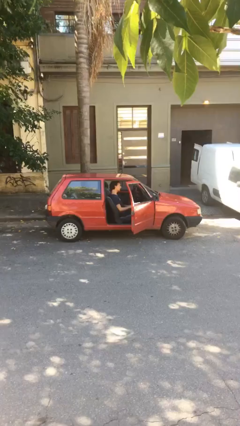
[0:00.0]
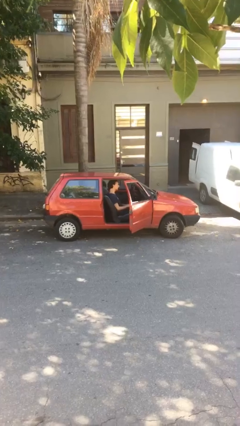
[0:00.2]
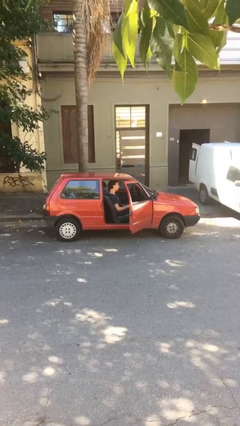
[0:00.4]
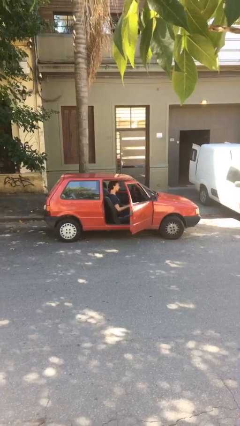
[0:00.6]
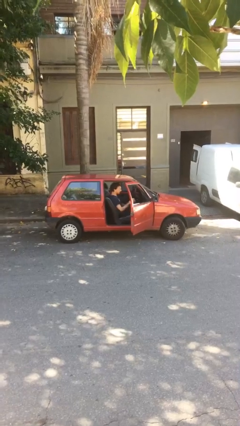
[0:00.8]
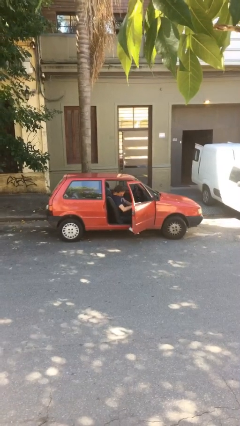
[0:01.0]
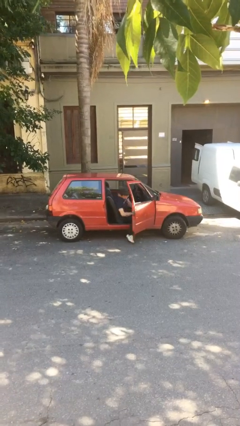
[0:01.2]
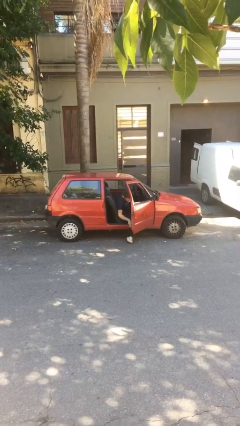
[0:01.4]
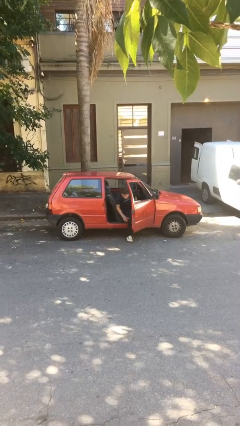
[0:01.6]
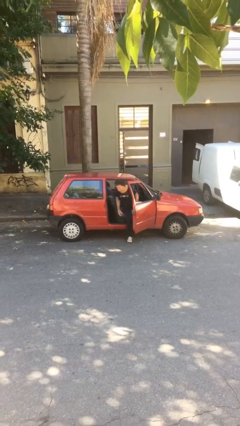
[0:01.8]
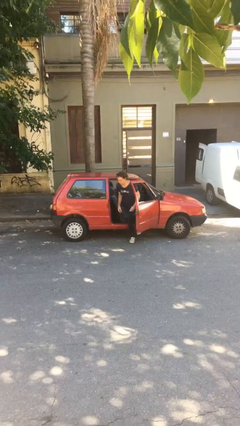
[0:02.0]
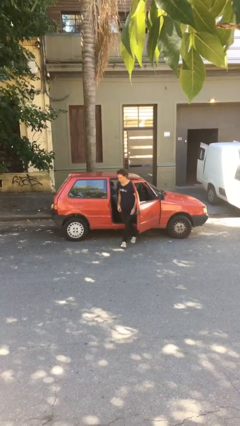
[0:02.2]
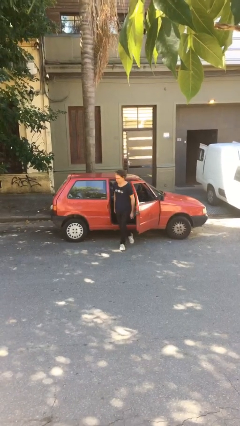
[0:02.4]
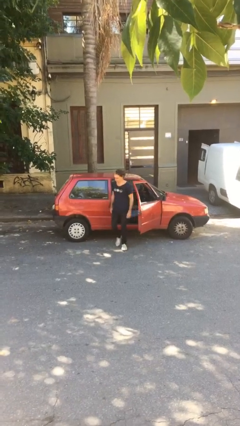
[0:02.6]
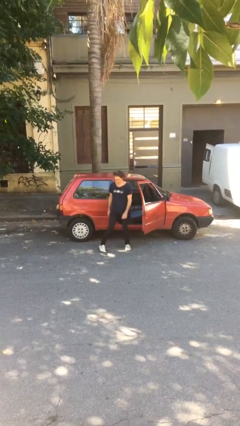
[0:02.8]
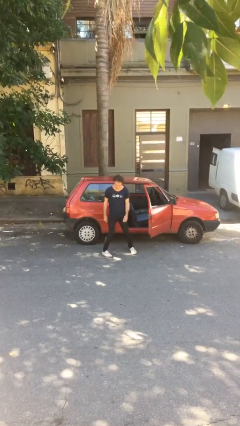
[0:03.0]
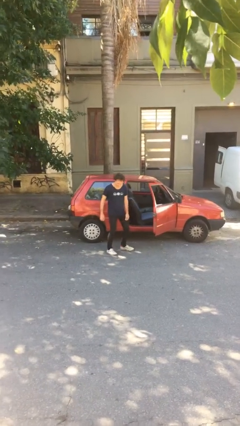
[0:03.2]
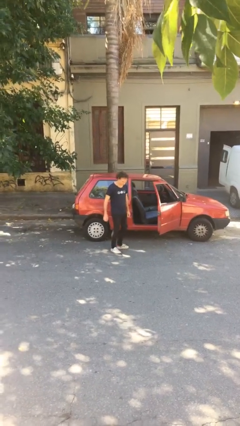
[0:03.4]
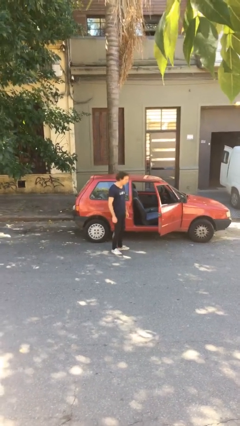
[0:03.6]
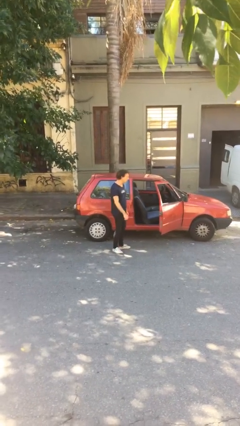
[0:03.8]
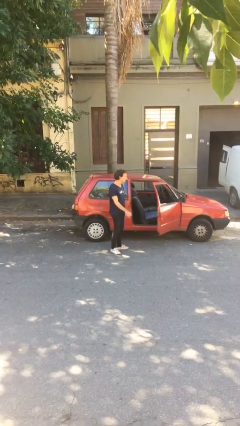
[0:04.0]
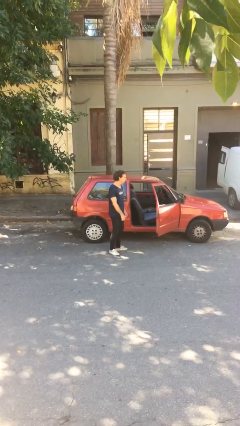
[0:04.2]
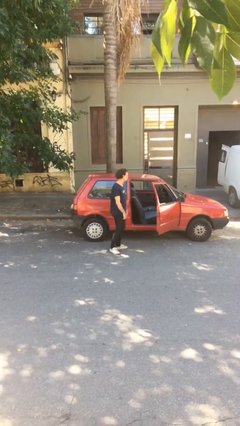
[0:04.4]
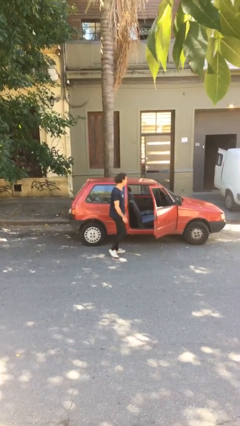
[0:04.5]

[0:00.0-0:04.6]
person exits car

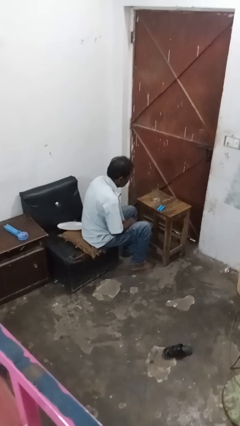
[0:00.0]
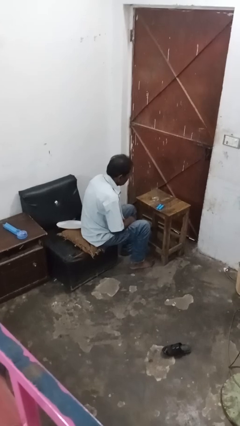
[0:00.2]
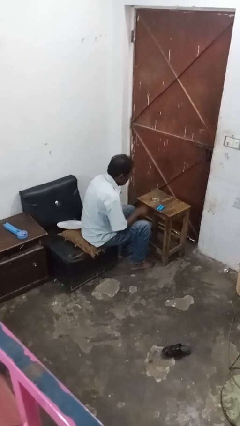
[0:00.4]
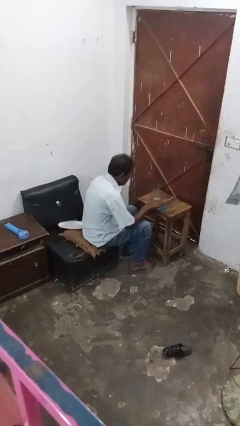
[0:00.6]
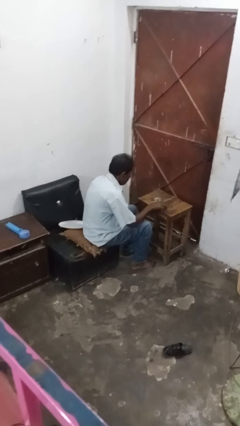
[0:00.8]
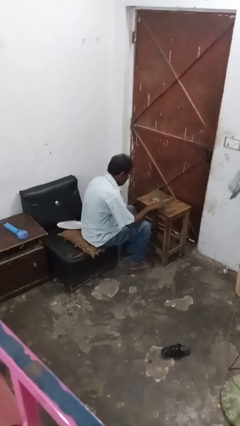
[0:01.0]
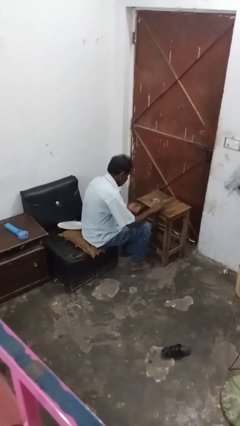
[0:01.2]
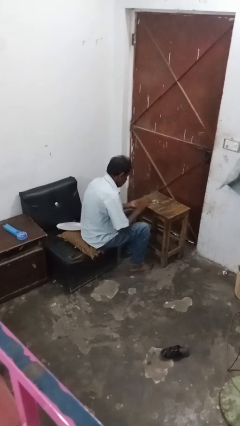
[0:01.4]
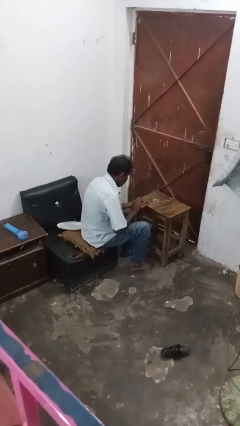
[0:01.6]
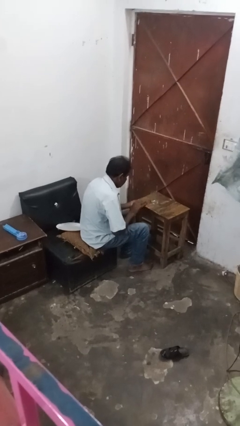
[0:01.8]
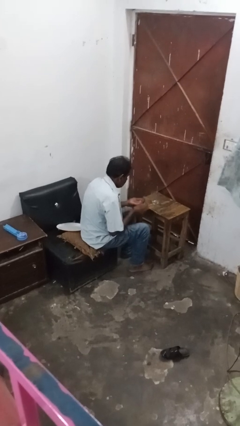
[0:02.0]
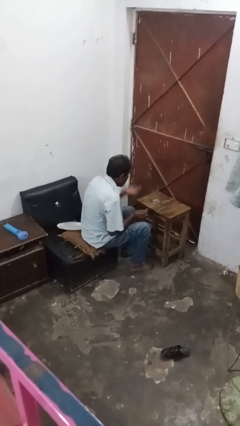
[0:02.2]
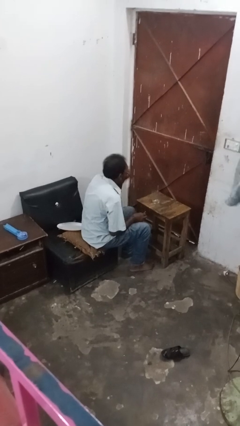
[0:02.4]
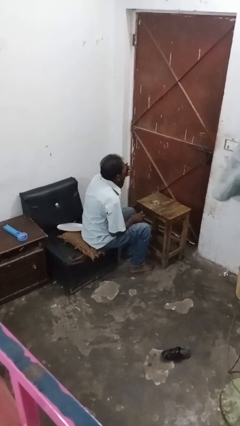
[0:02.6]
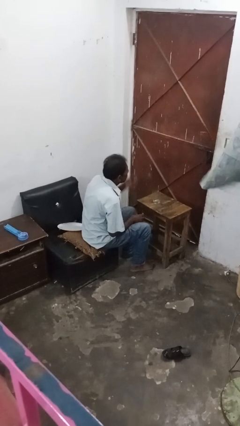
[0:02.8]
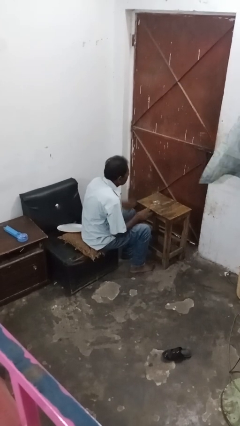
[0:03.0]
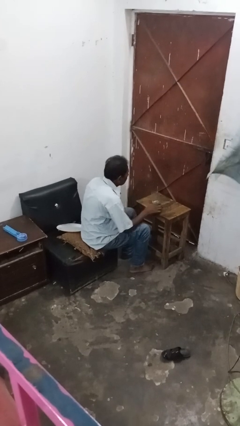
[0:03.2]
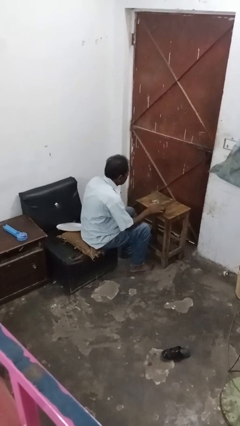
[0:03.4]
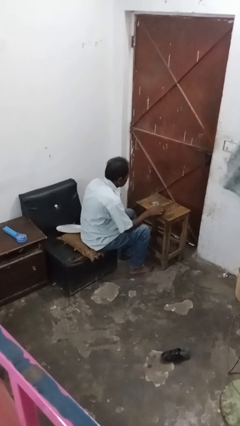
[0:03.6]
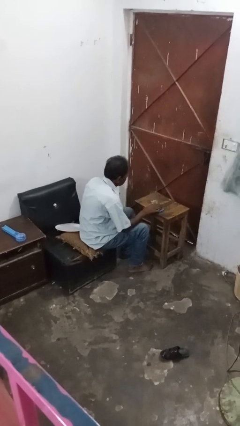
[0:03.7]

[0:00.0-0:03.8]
person takes medicine pills

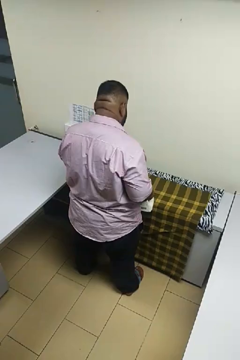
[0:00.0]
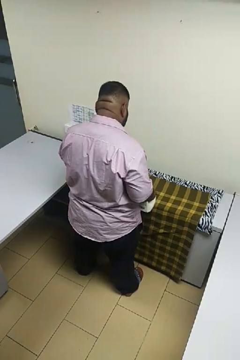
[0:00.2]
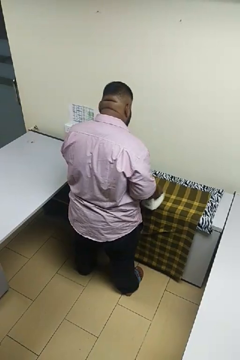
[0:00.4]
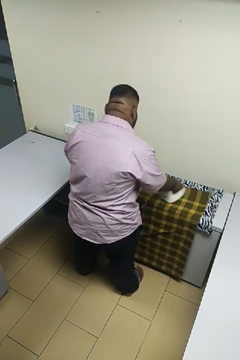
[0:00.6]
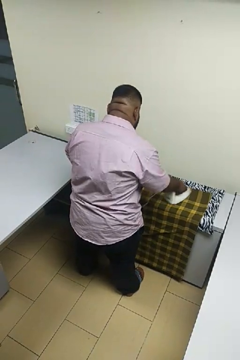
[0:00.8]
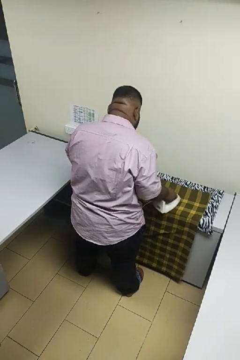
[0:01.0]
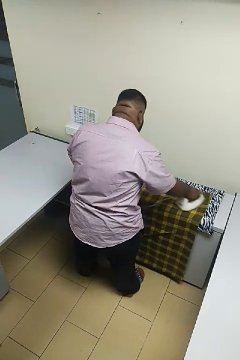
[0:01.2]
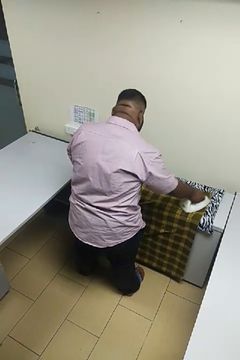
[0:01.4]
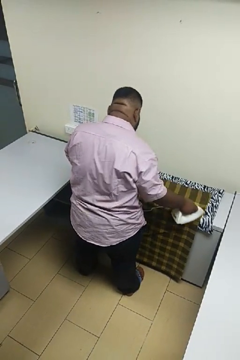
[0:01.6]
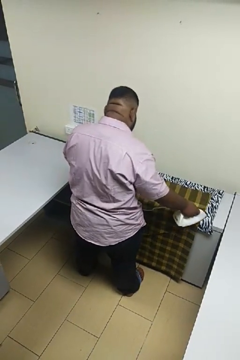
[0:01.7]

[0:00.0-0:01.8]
person irons clothes

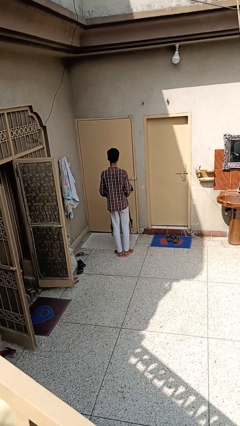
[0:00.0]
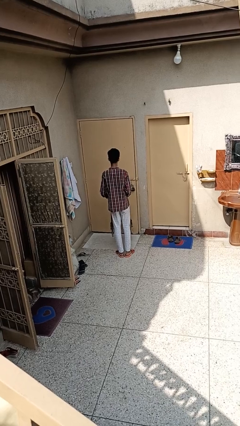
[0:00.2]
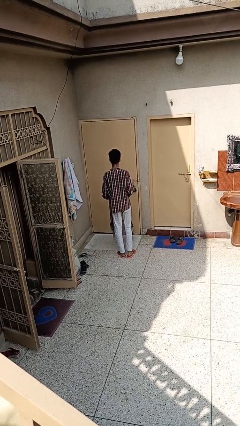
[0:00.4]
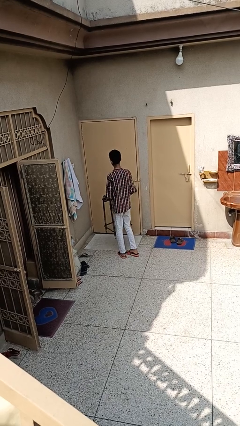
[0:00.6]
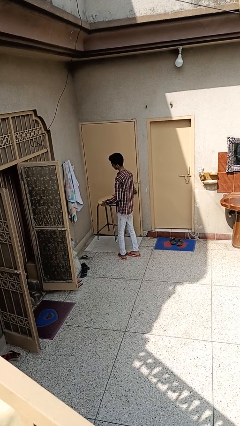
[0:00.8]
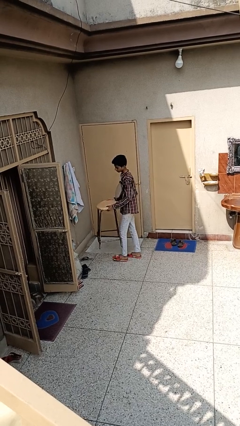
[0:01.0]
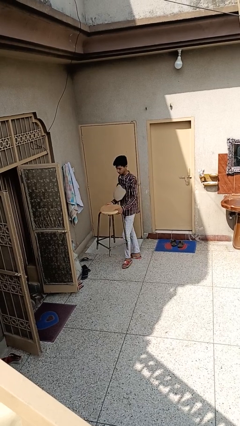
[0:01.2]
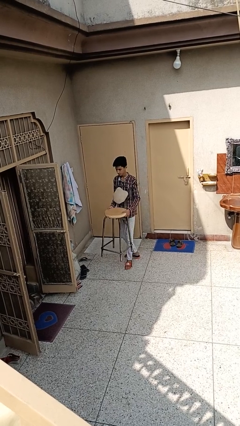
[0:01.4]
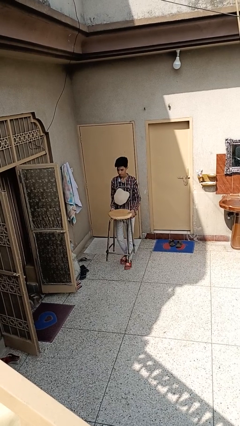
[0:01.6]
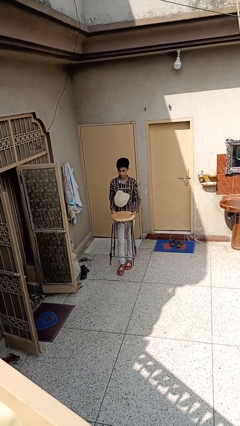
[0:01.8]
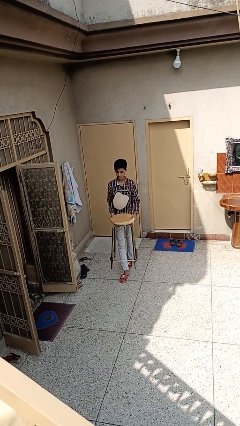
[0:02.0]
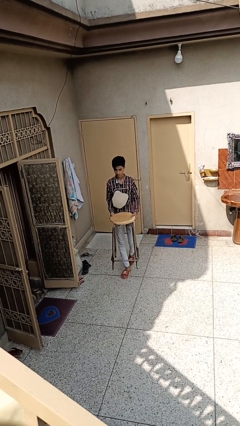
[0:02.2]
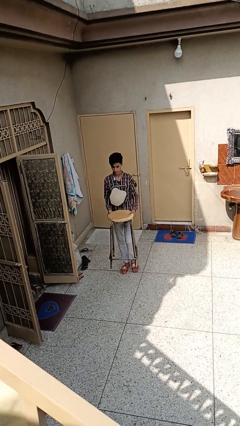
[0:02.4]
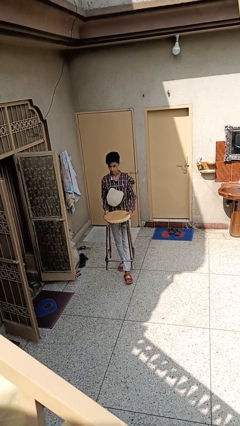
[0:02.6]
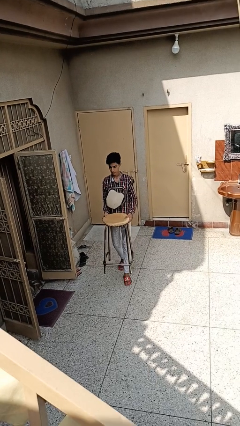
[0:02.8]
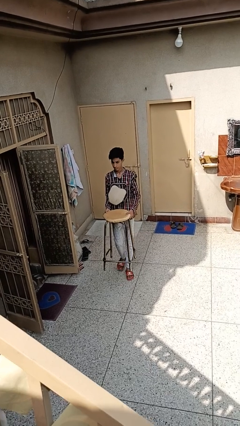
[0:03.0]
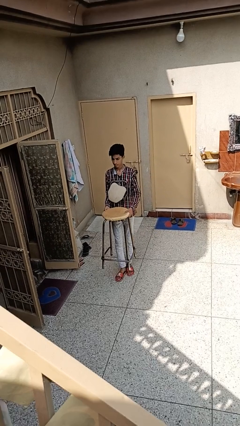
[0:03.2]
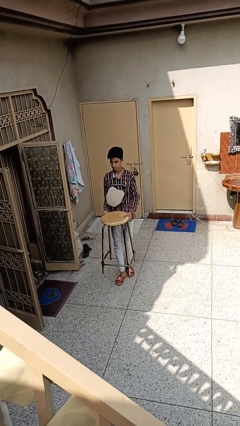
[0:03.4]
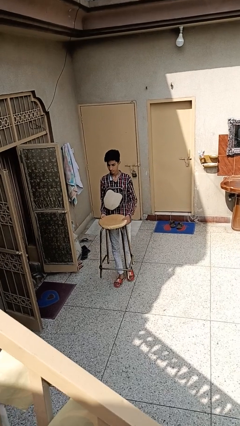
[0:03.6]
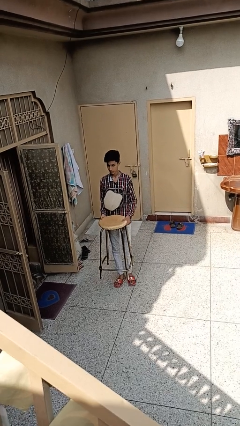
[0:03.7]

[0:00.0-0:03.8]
person carries furniture

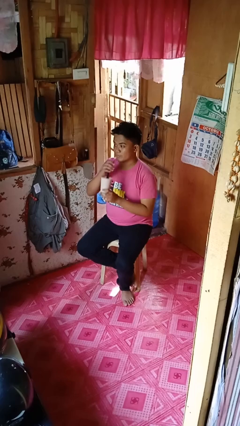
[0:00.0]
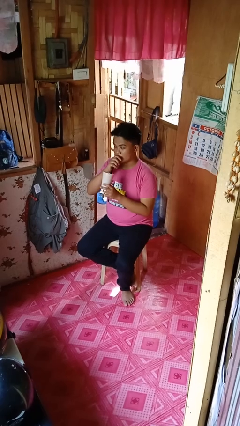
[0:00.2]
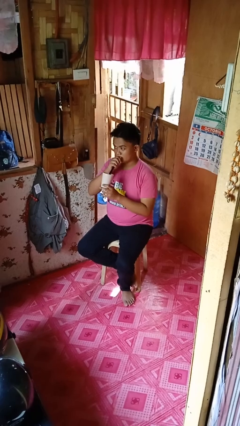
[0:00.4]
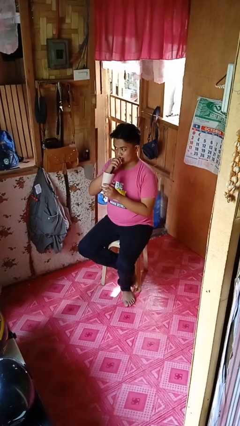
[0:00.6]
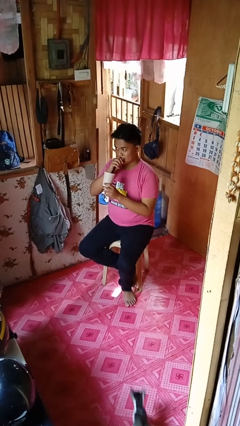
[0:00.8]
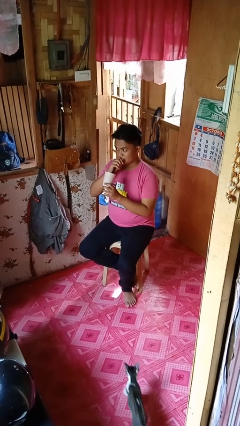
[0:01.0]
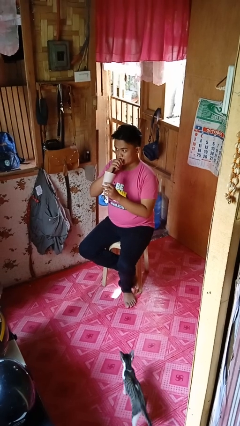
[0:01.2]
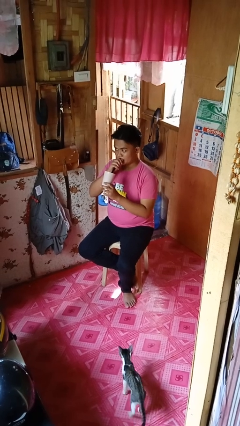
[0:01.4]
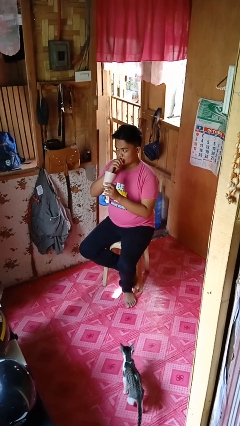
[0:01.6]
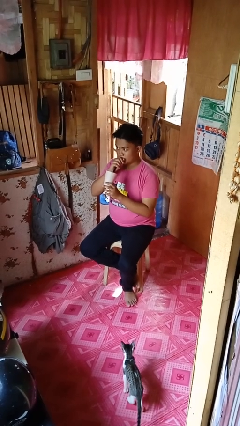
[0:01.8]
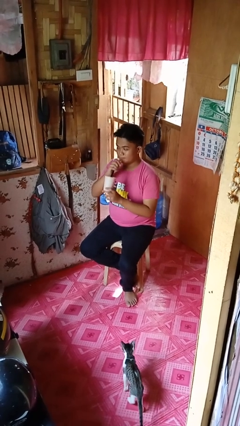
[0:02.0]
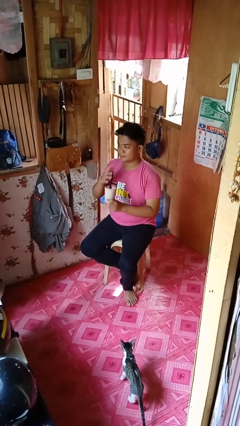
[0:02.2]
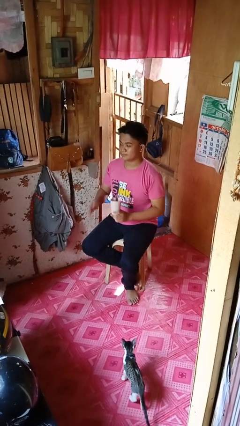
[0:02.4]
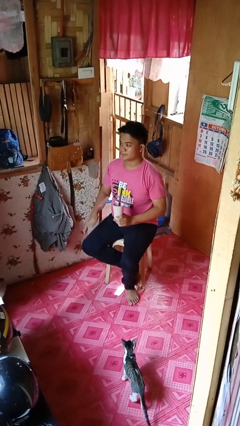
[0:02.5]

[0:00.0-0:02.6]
person drinks from straw

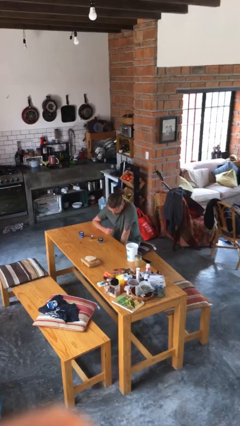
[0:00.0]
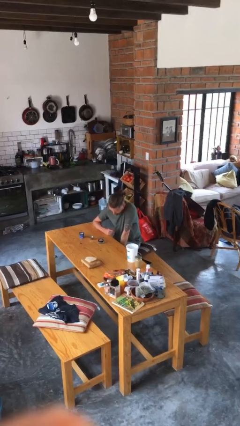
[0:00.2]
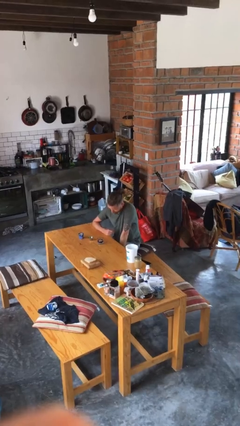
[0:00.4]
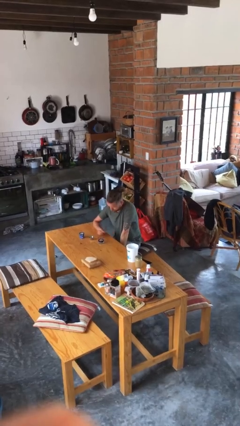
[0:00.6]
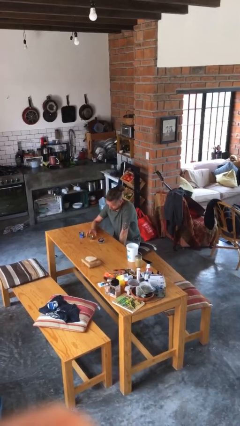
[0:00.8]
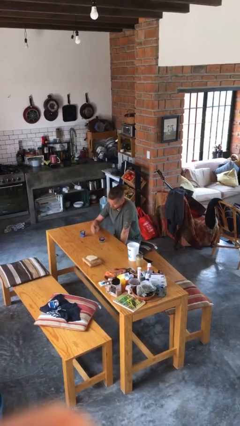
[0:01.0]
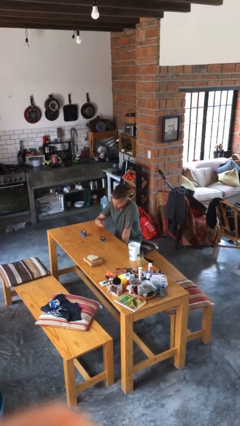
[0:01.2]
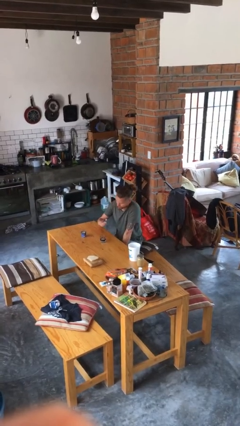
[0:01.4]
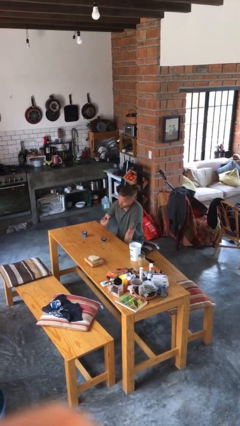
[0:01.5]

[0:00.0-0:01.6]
person picks up object from table
